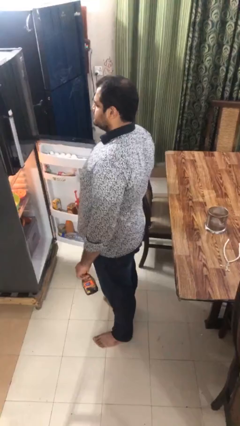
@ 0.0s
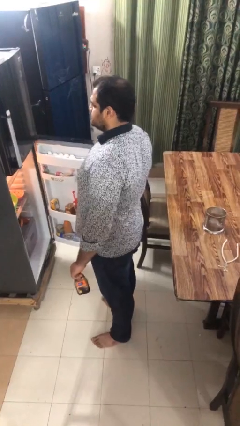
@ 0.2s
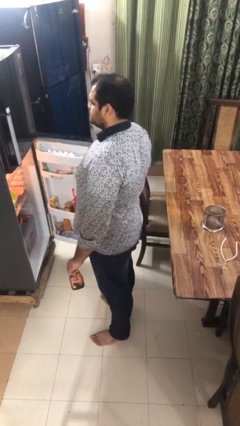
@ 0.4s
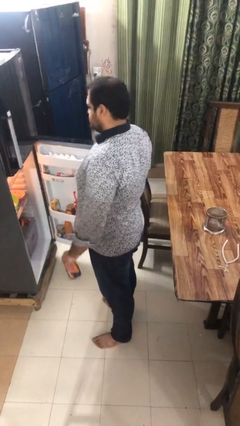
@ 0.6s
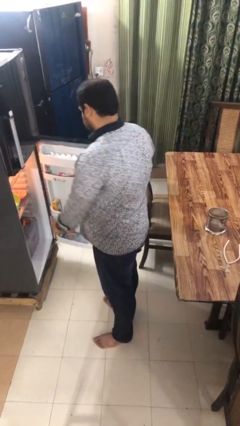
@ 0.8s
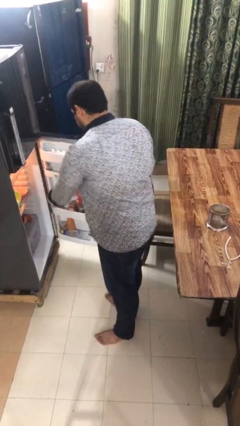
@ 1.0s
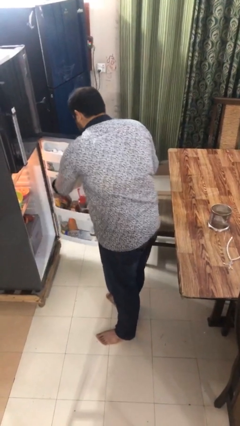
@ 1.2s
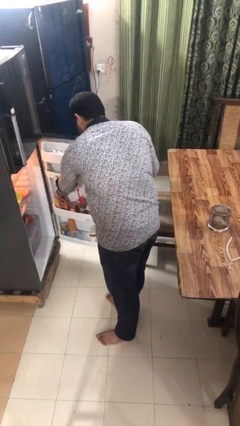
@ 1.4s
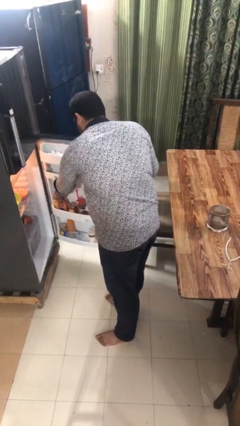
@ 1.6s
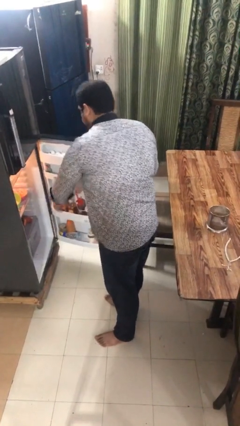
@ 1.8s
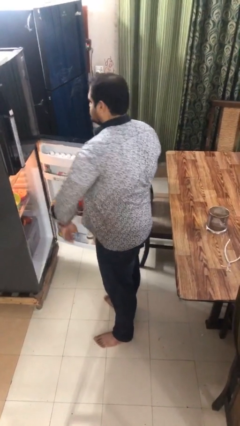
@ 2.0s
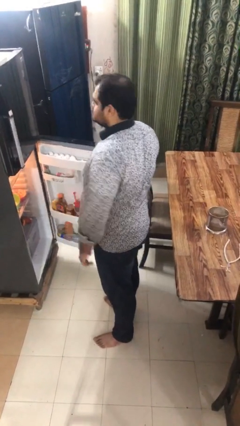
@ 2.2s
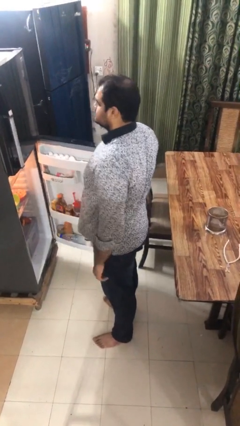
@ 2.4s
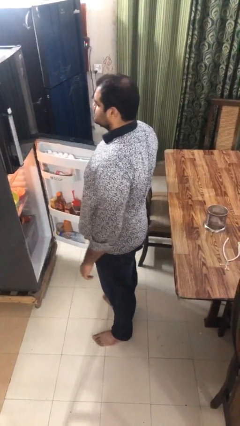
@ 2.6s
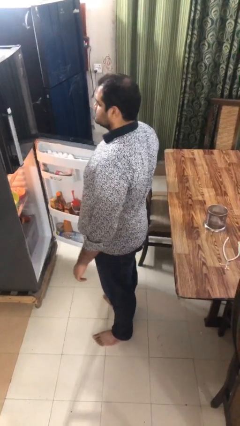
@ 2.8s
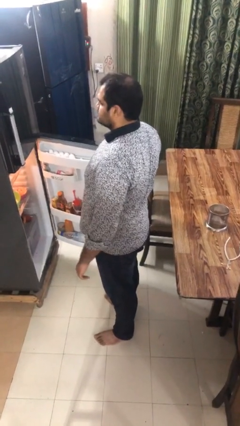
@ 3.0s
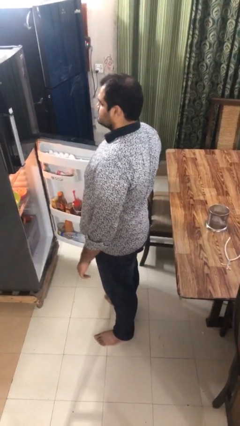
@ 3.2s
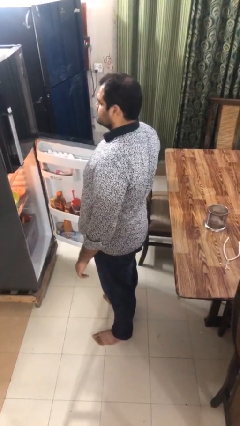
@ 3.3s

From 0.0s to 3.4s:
person puts object into refrigerator

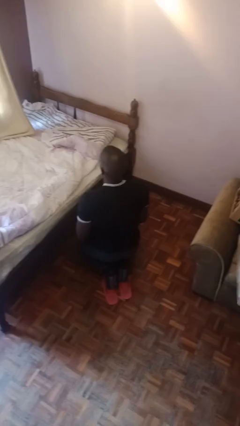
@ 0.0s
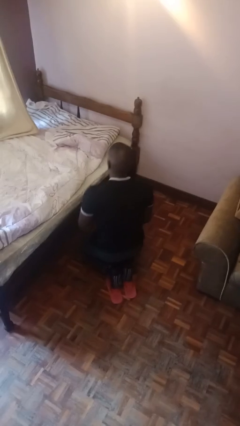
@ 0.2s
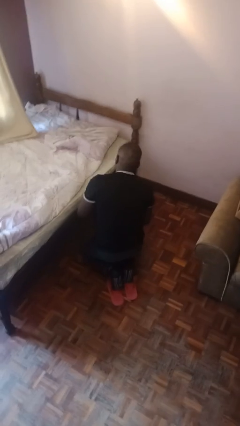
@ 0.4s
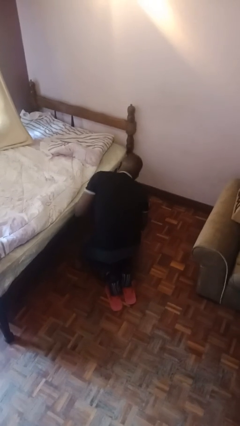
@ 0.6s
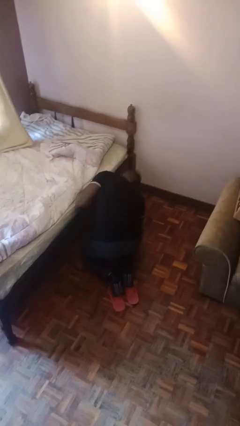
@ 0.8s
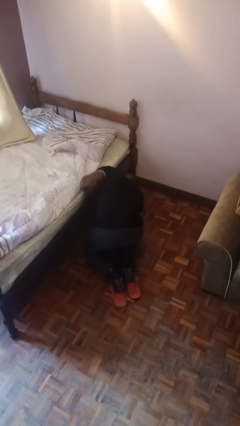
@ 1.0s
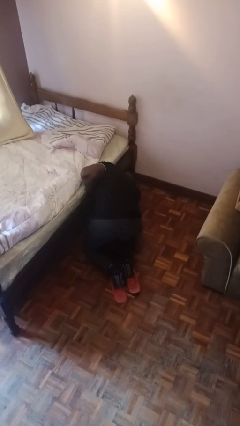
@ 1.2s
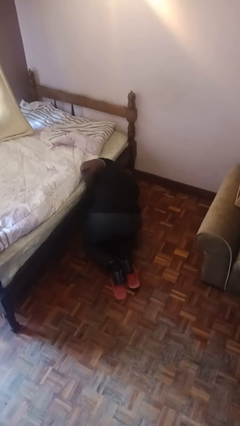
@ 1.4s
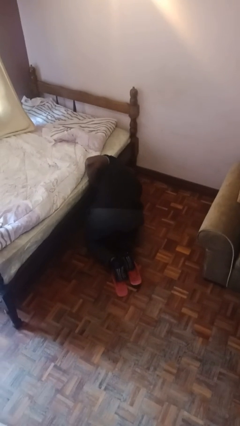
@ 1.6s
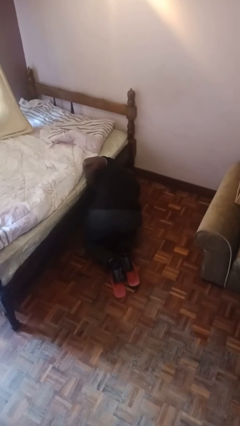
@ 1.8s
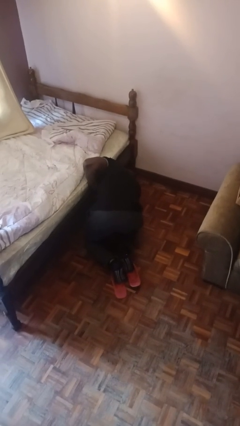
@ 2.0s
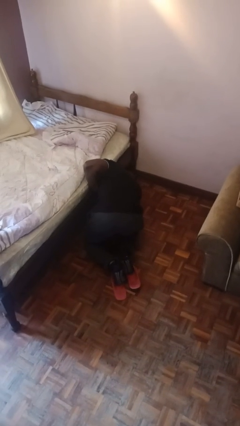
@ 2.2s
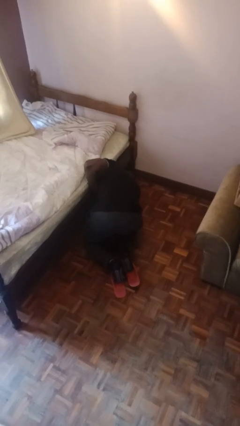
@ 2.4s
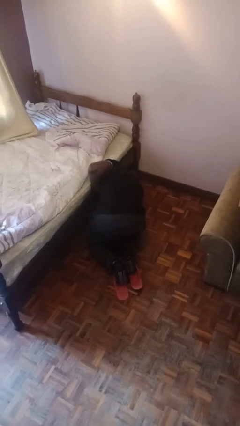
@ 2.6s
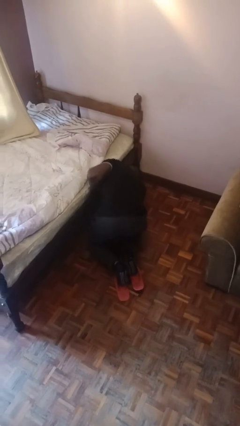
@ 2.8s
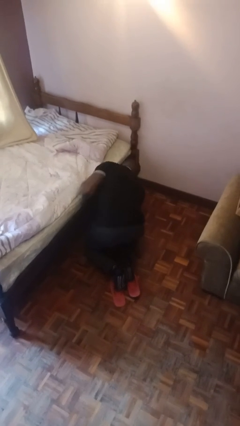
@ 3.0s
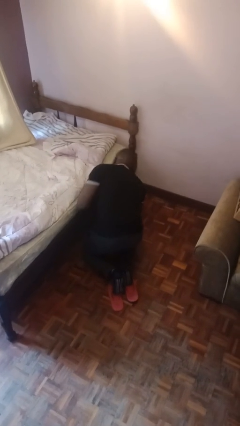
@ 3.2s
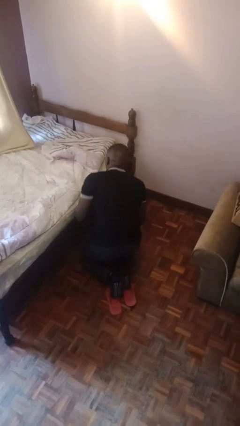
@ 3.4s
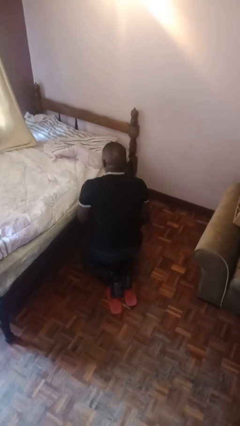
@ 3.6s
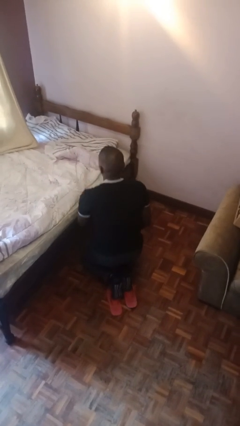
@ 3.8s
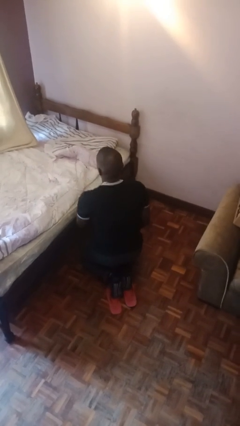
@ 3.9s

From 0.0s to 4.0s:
person searches under bed

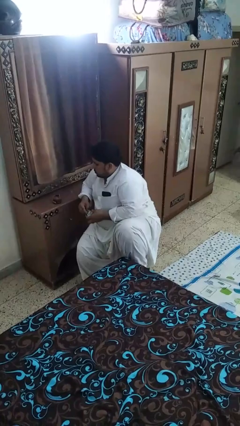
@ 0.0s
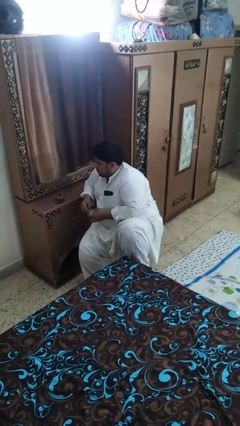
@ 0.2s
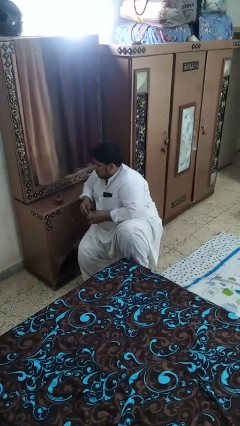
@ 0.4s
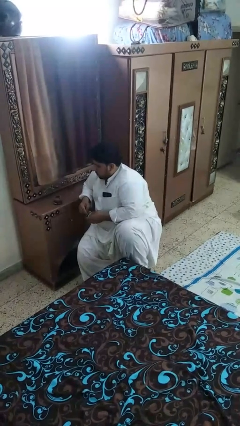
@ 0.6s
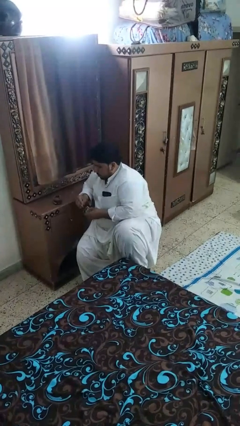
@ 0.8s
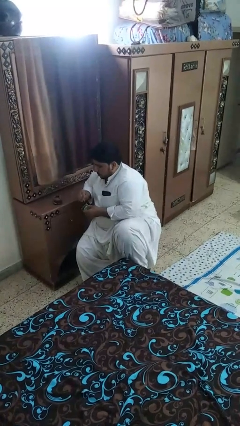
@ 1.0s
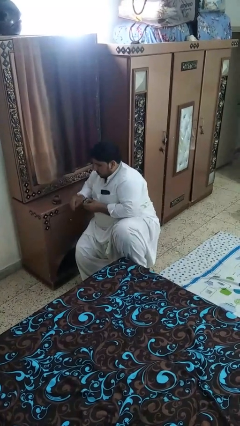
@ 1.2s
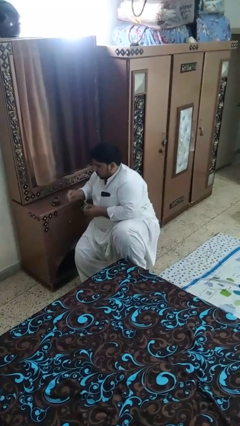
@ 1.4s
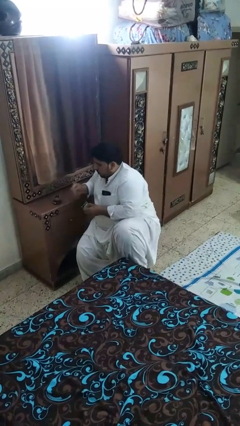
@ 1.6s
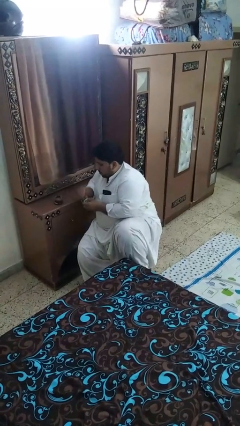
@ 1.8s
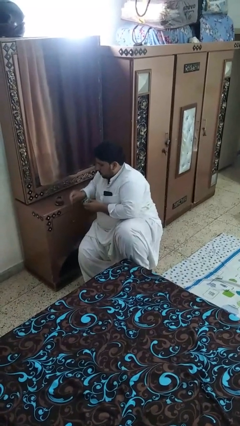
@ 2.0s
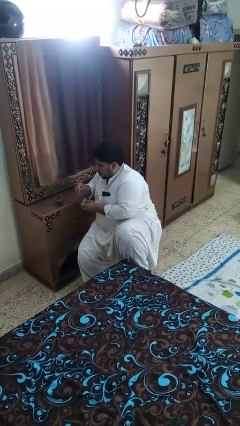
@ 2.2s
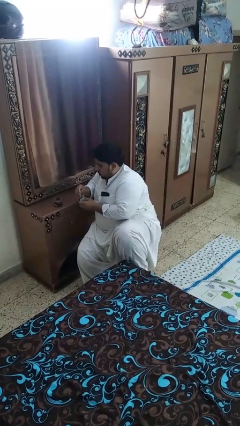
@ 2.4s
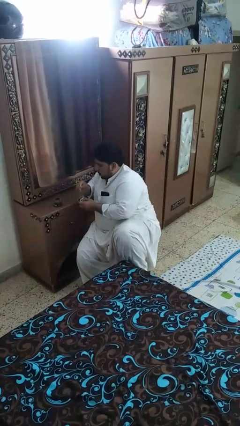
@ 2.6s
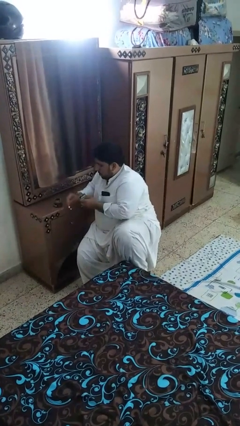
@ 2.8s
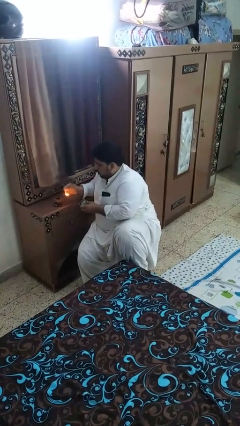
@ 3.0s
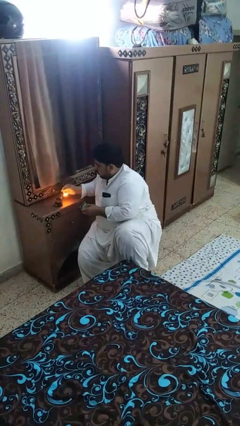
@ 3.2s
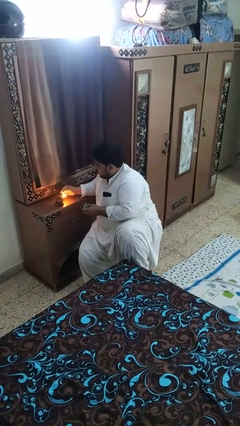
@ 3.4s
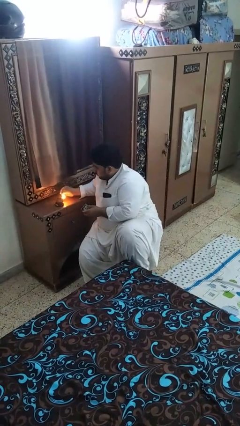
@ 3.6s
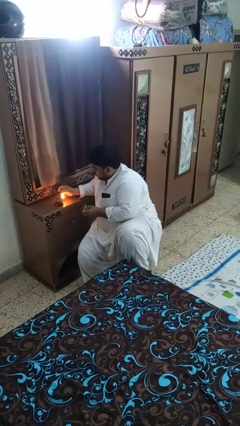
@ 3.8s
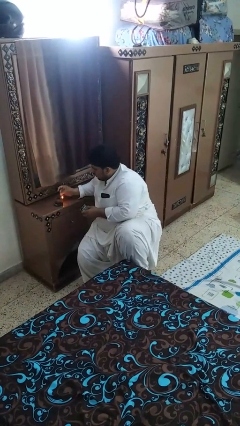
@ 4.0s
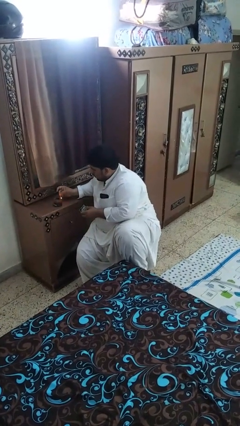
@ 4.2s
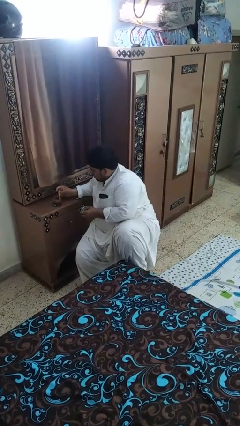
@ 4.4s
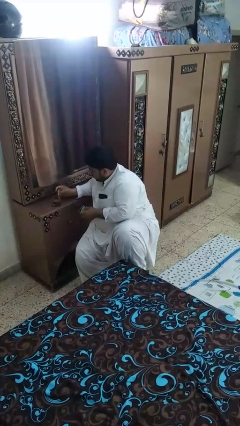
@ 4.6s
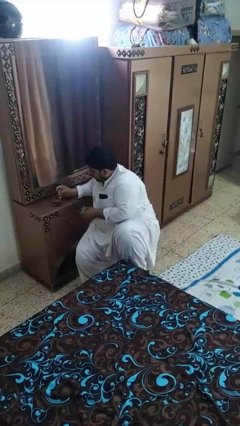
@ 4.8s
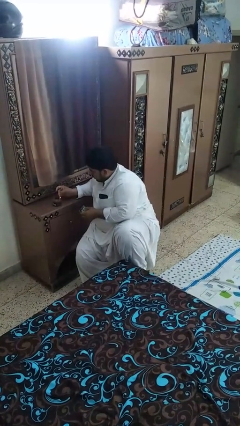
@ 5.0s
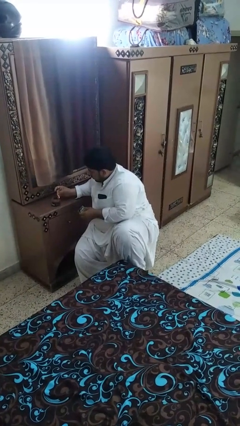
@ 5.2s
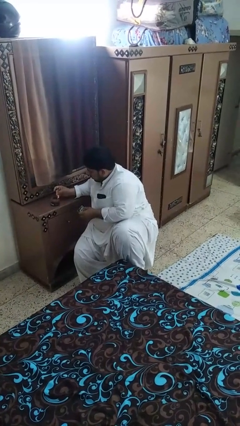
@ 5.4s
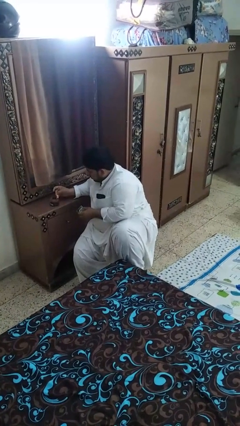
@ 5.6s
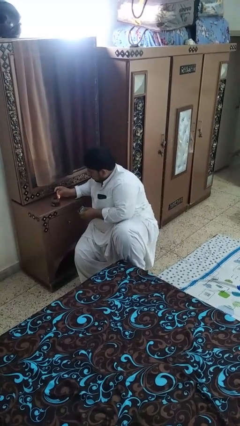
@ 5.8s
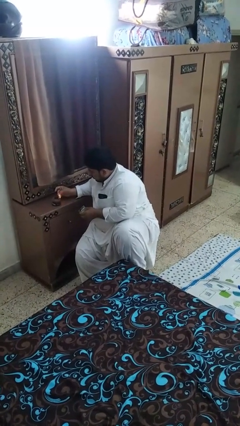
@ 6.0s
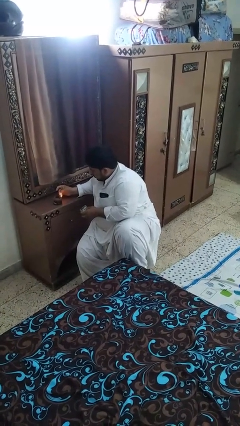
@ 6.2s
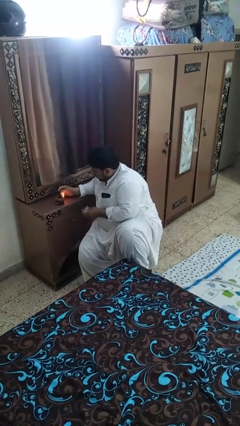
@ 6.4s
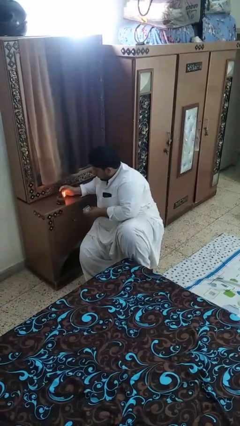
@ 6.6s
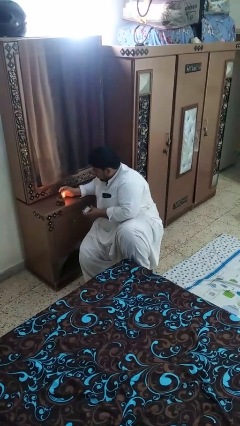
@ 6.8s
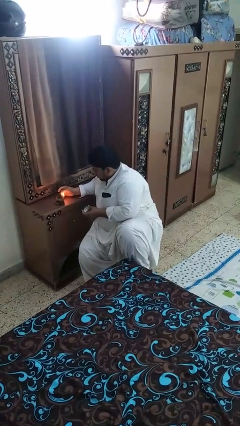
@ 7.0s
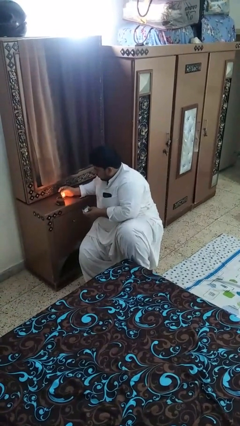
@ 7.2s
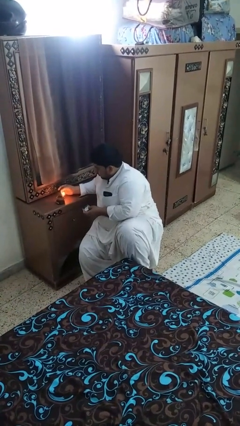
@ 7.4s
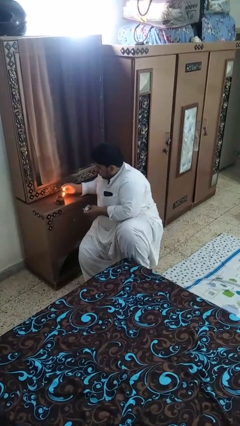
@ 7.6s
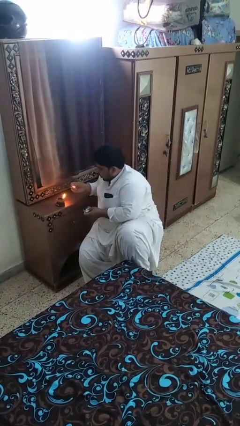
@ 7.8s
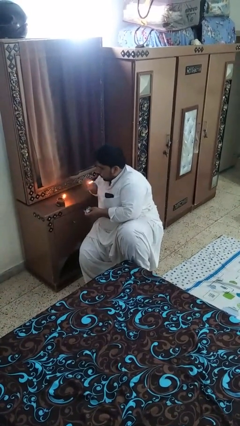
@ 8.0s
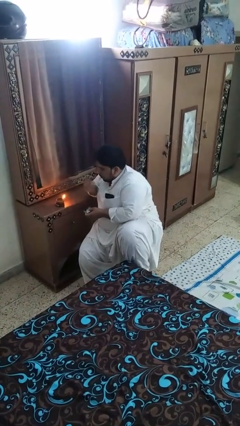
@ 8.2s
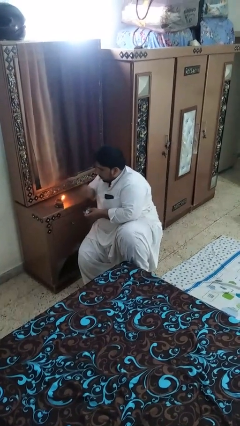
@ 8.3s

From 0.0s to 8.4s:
person lights candle

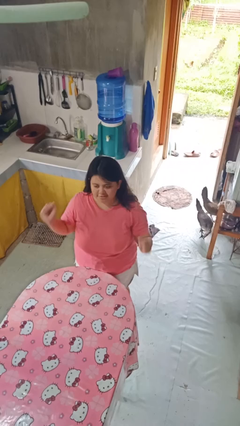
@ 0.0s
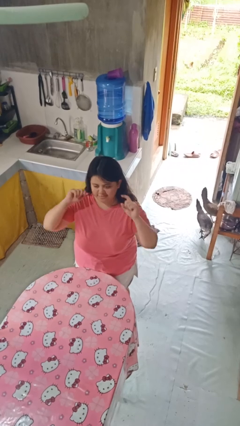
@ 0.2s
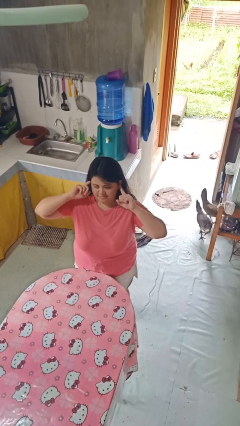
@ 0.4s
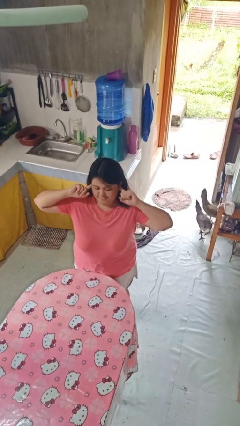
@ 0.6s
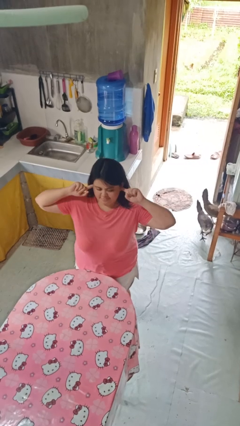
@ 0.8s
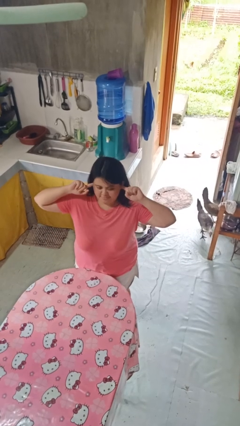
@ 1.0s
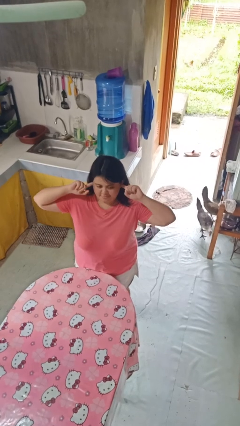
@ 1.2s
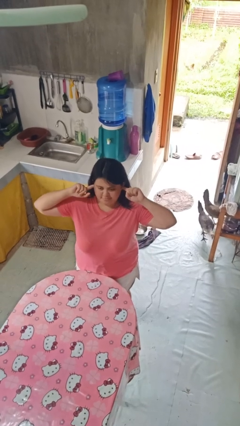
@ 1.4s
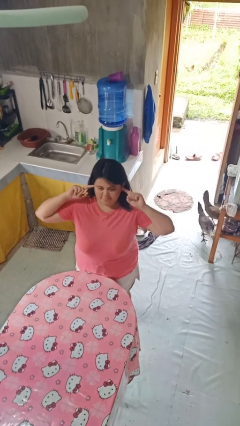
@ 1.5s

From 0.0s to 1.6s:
person puts fingers in ear
